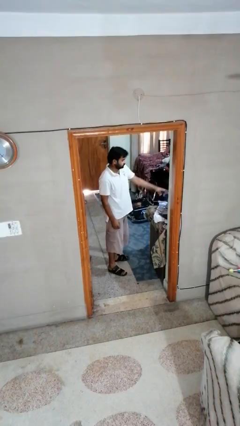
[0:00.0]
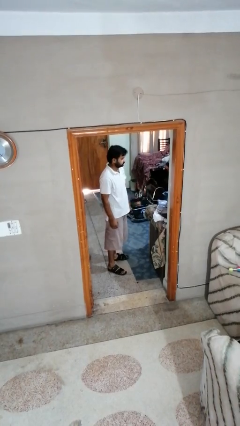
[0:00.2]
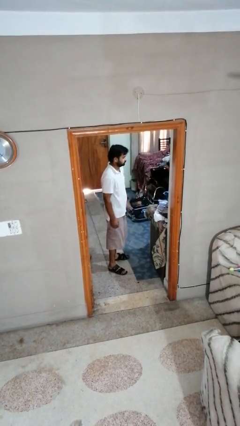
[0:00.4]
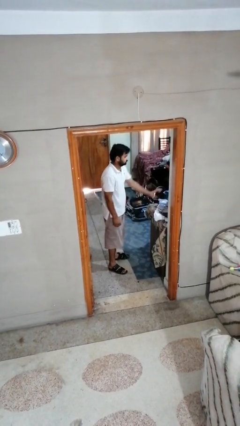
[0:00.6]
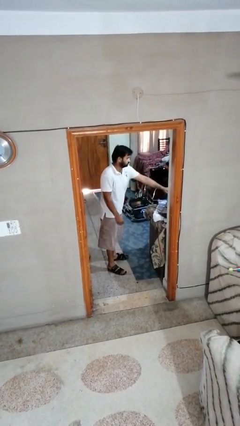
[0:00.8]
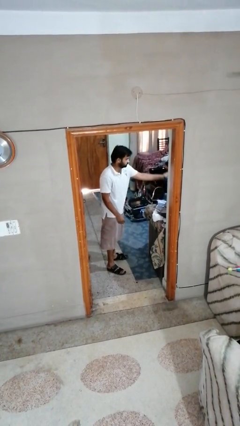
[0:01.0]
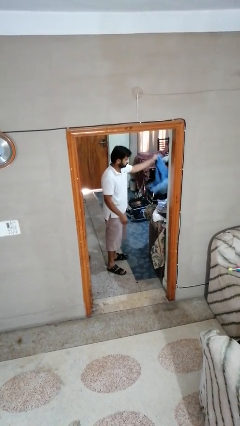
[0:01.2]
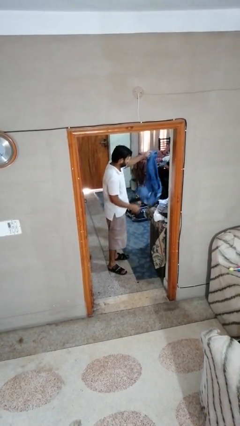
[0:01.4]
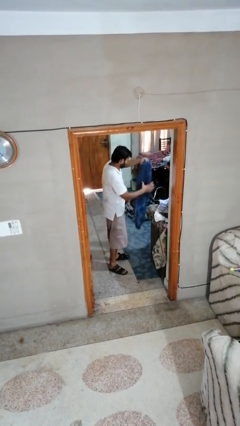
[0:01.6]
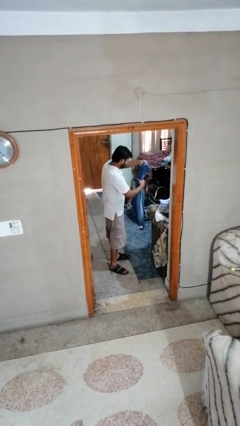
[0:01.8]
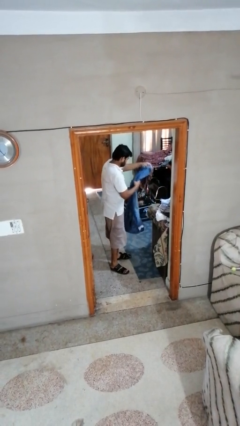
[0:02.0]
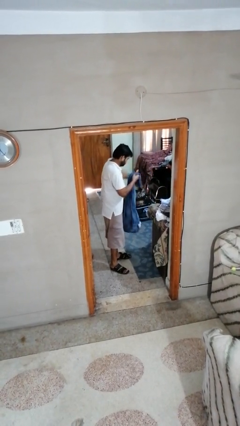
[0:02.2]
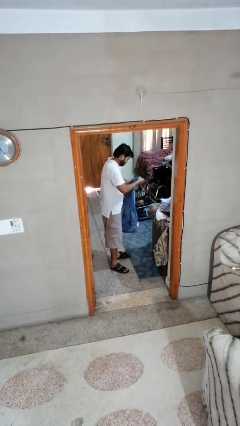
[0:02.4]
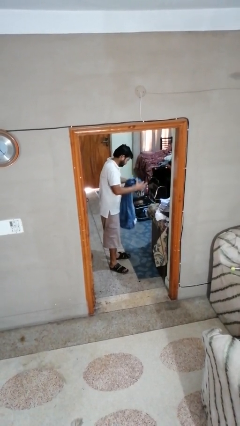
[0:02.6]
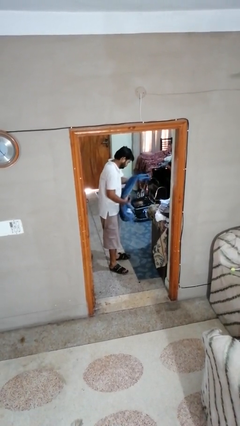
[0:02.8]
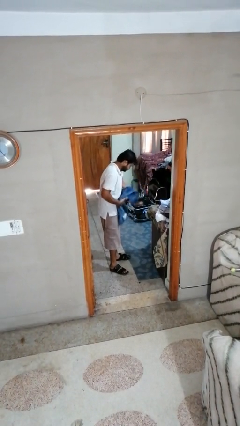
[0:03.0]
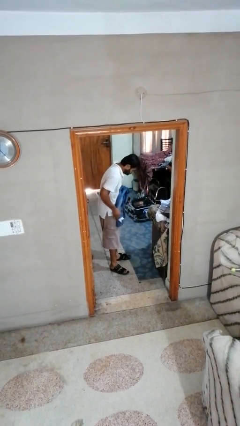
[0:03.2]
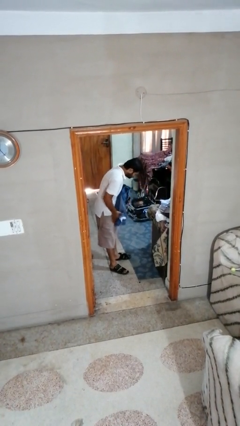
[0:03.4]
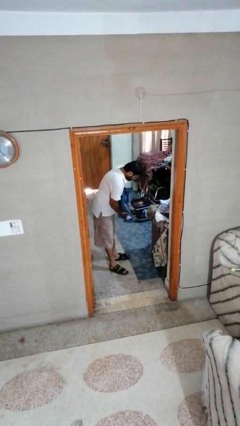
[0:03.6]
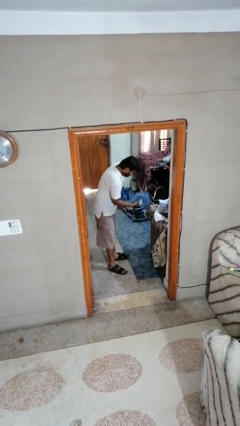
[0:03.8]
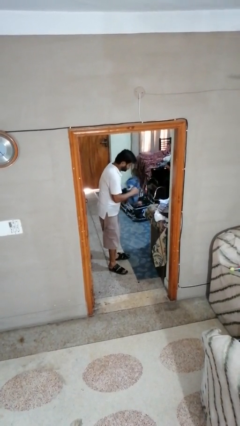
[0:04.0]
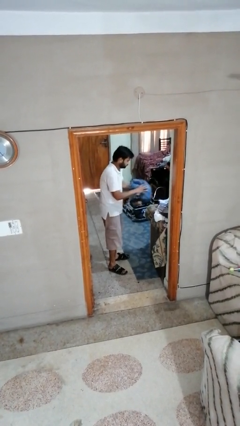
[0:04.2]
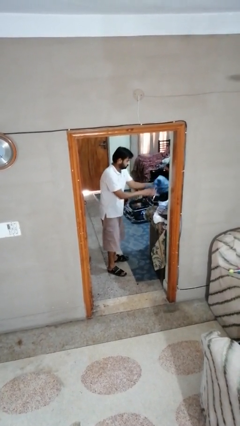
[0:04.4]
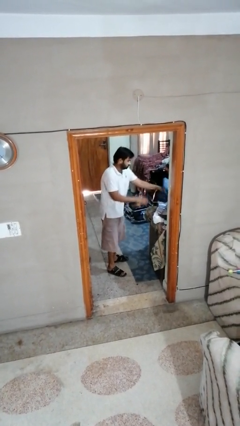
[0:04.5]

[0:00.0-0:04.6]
person folds pants

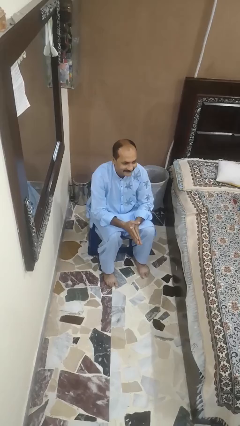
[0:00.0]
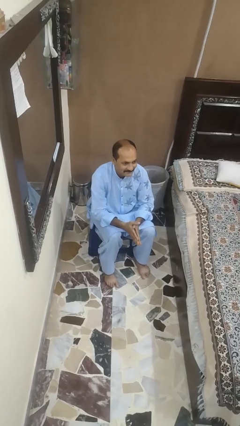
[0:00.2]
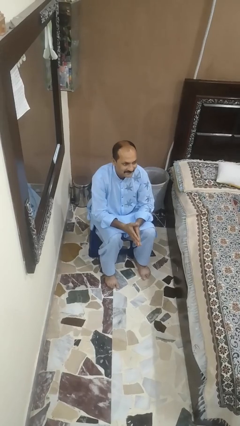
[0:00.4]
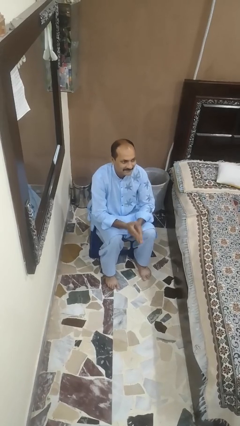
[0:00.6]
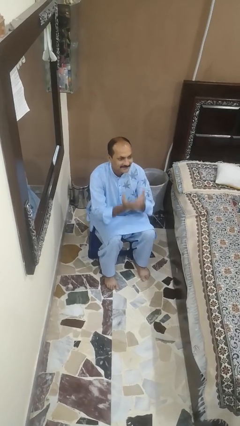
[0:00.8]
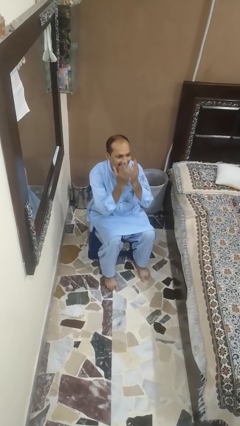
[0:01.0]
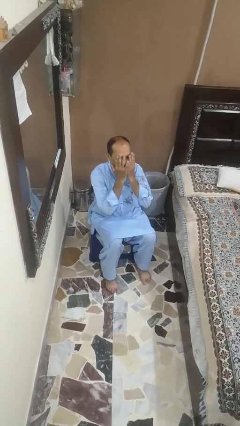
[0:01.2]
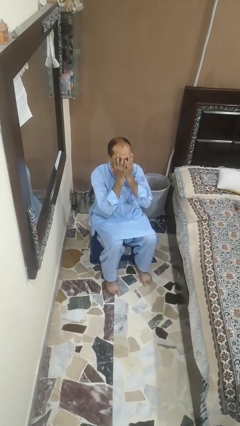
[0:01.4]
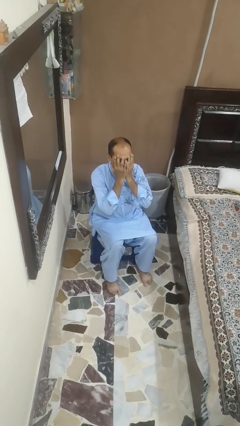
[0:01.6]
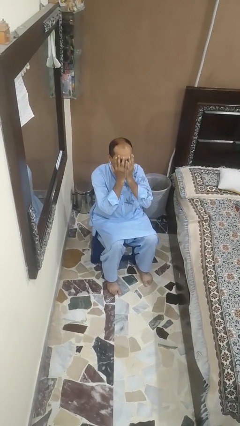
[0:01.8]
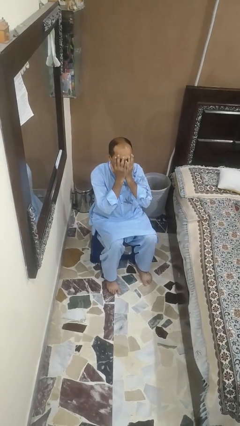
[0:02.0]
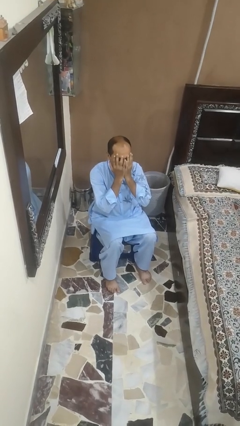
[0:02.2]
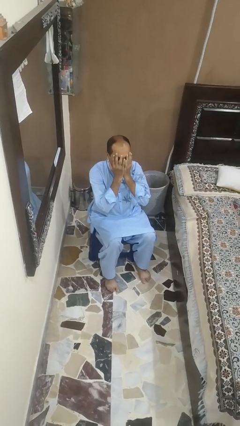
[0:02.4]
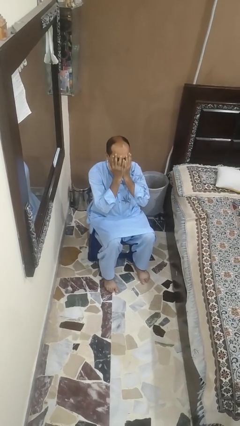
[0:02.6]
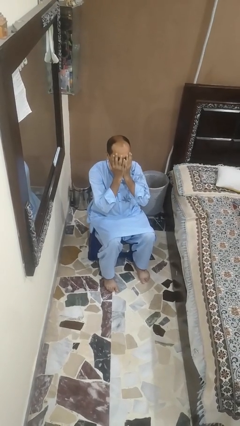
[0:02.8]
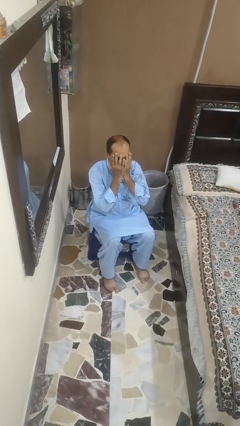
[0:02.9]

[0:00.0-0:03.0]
person covers face with hands

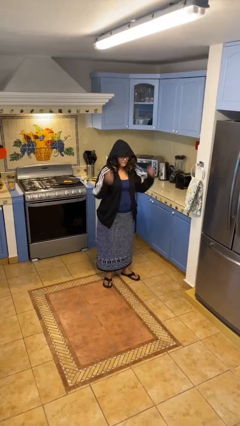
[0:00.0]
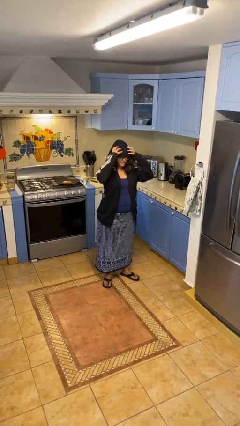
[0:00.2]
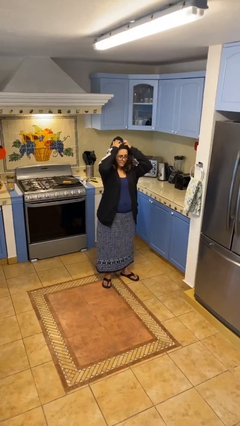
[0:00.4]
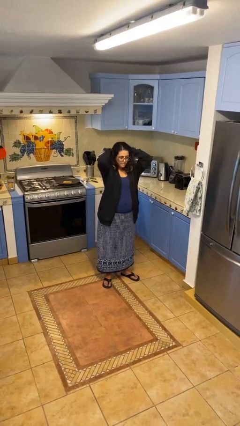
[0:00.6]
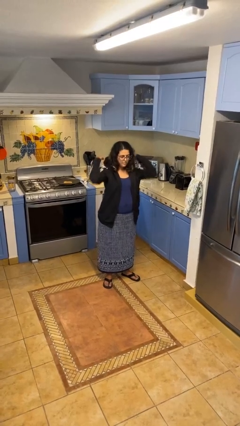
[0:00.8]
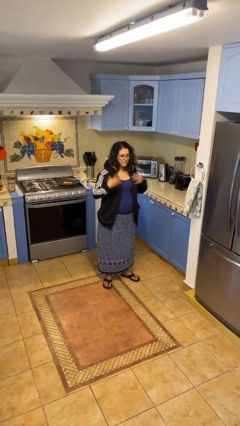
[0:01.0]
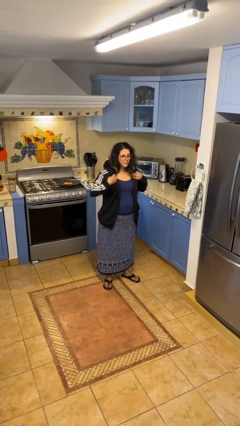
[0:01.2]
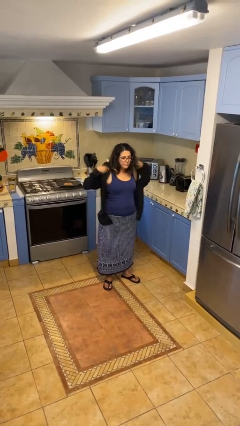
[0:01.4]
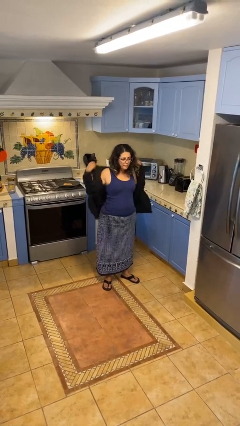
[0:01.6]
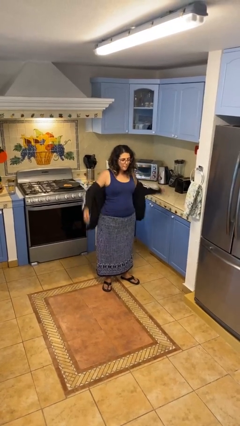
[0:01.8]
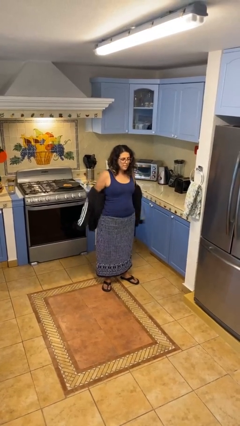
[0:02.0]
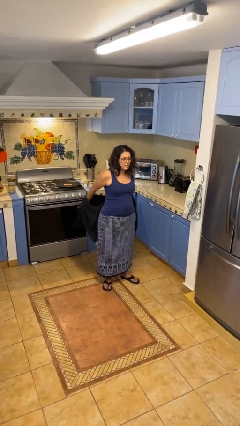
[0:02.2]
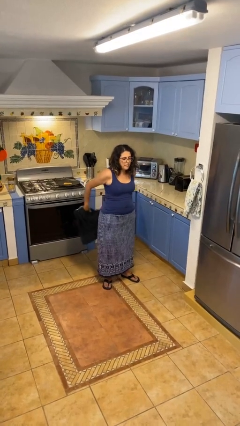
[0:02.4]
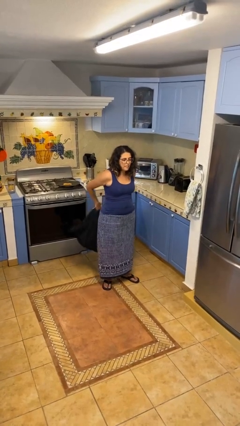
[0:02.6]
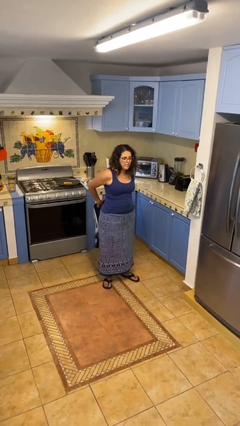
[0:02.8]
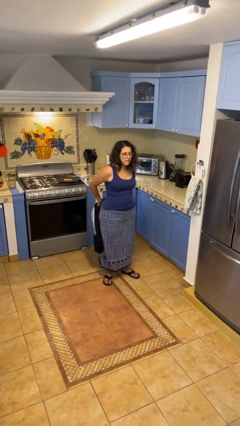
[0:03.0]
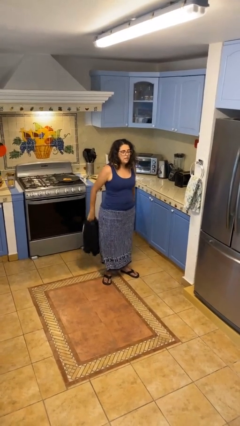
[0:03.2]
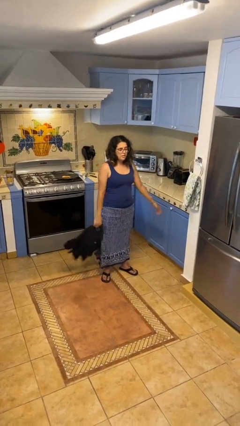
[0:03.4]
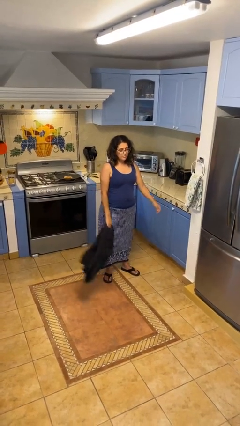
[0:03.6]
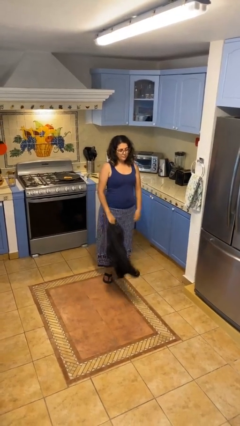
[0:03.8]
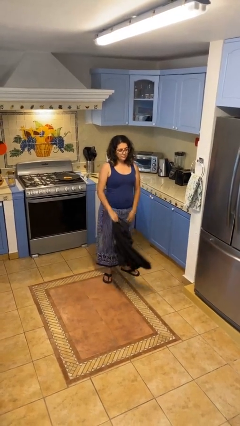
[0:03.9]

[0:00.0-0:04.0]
person takes off hoodie

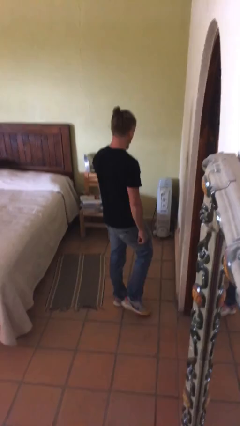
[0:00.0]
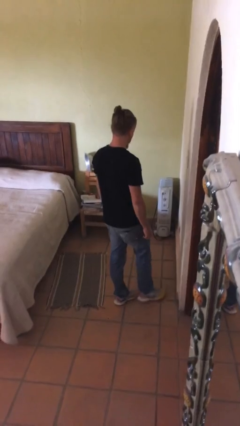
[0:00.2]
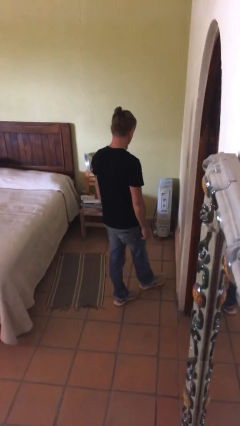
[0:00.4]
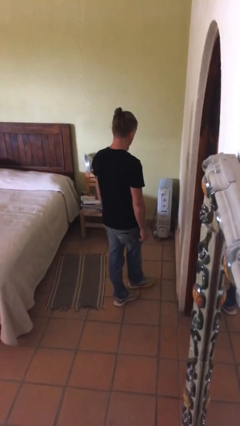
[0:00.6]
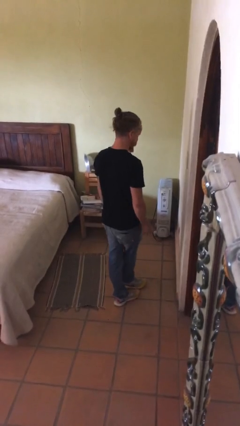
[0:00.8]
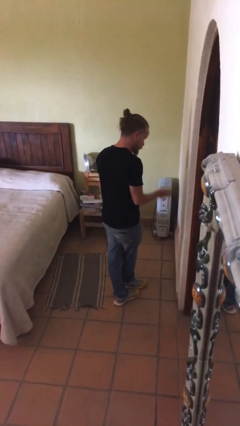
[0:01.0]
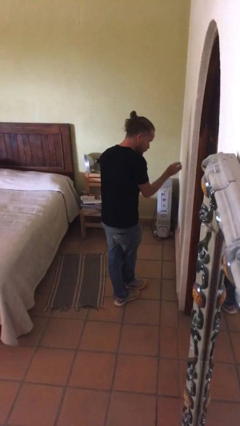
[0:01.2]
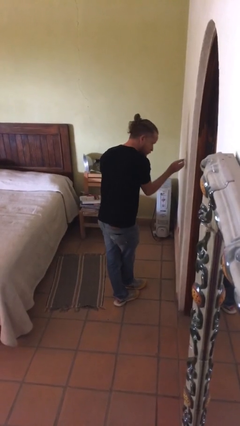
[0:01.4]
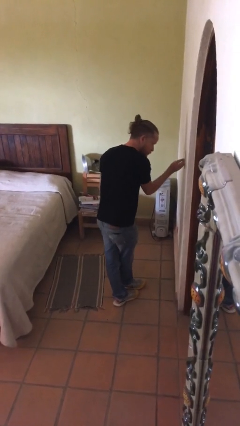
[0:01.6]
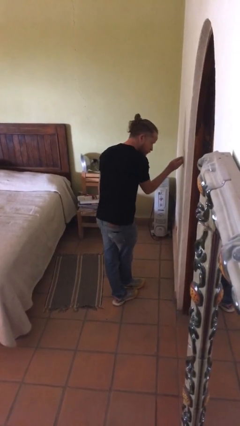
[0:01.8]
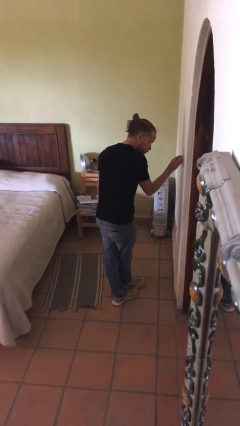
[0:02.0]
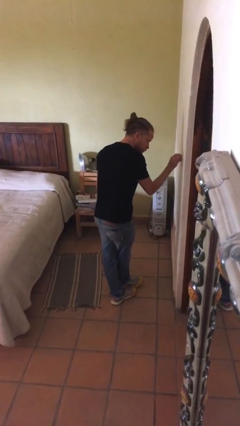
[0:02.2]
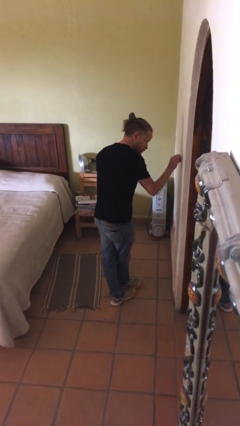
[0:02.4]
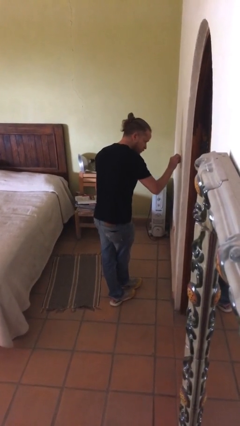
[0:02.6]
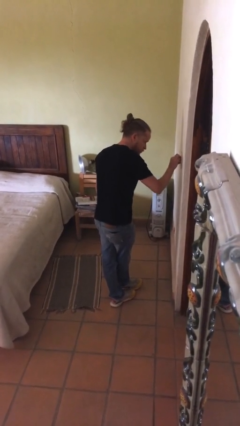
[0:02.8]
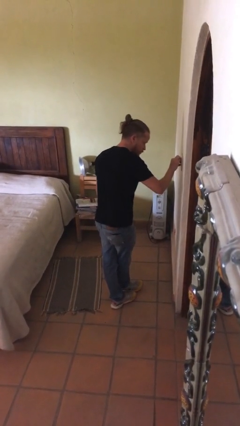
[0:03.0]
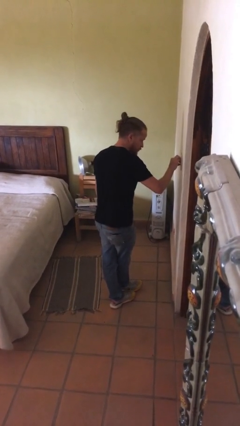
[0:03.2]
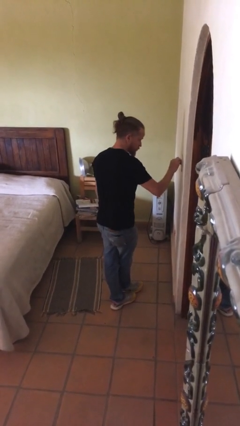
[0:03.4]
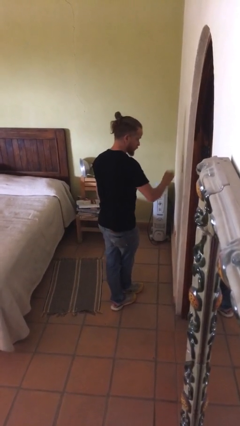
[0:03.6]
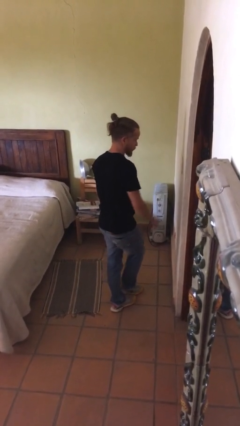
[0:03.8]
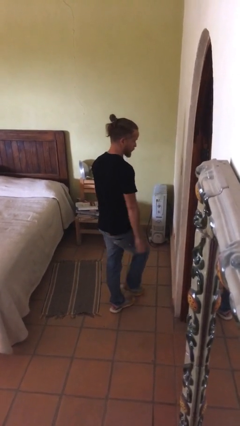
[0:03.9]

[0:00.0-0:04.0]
person adjusts thermostat

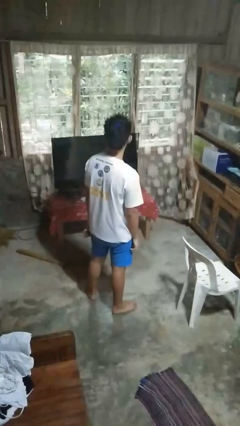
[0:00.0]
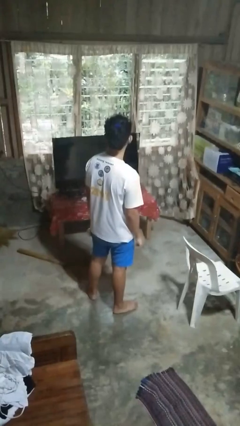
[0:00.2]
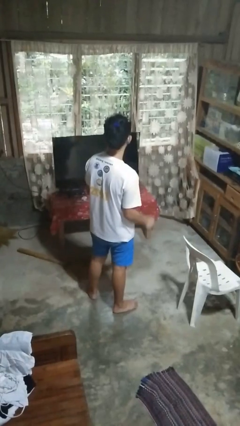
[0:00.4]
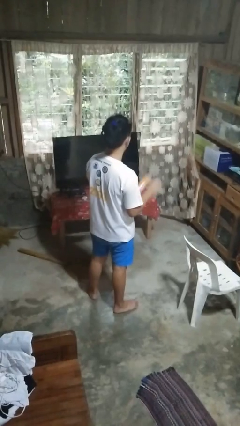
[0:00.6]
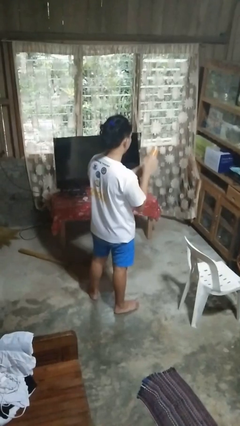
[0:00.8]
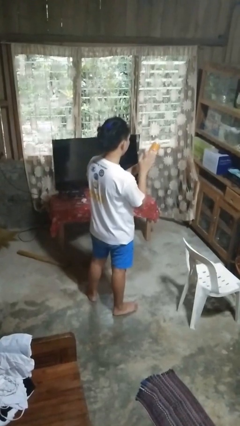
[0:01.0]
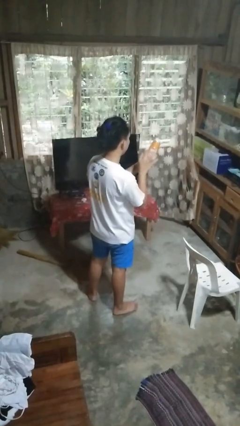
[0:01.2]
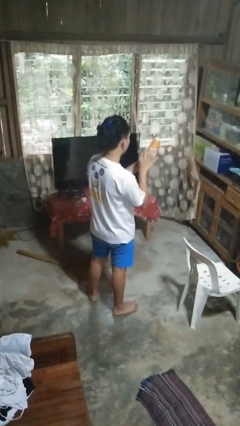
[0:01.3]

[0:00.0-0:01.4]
person taps object with finger

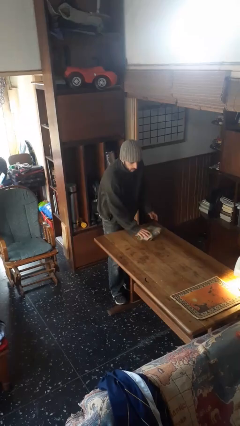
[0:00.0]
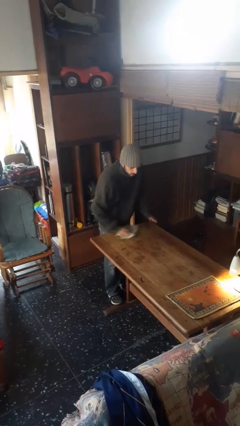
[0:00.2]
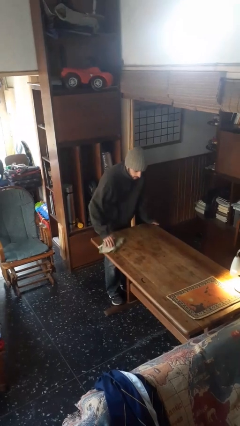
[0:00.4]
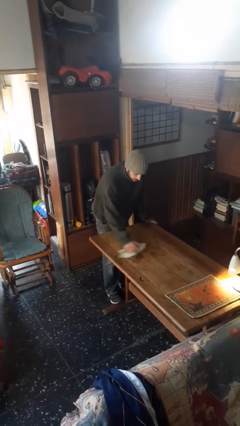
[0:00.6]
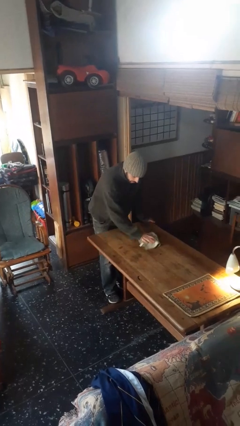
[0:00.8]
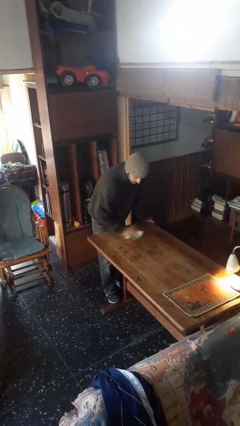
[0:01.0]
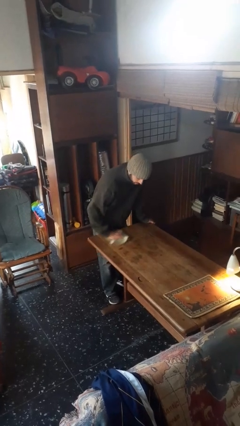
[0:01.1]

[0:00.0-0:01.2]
person cleans table with rag
